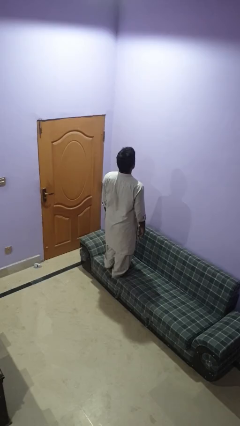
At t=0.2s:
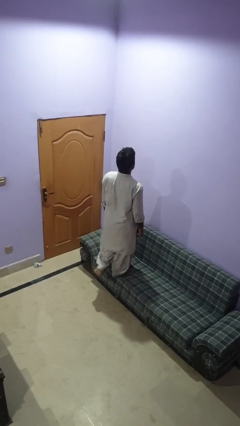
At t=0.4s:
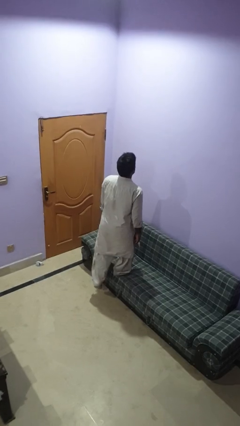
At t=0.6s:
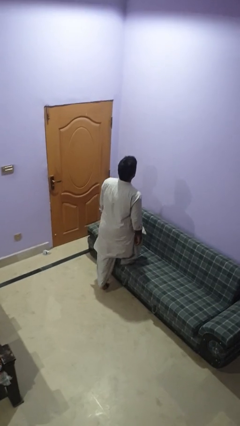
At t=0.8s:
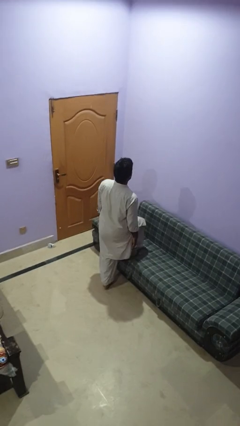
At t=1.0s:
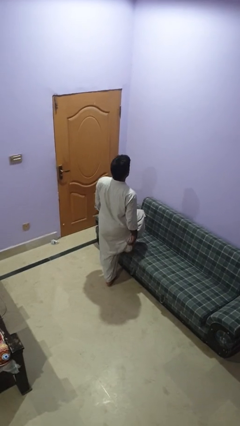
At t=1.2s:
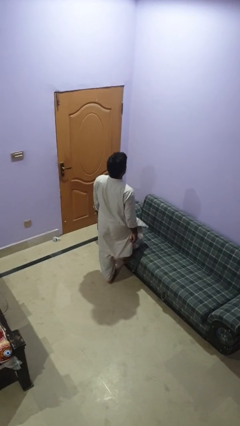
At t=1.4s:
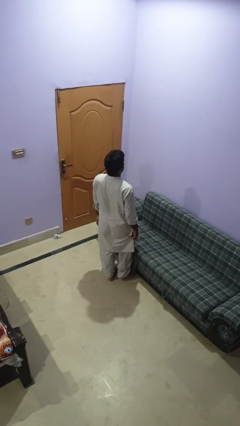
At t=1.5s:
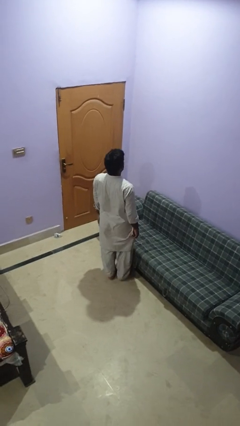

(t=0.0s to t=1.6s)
person climbs off couch

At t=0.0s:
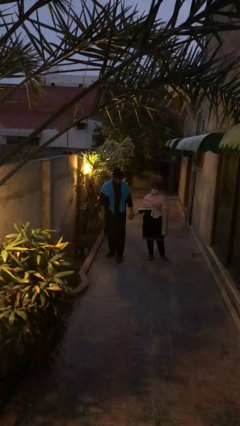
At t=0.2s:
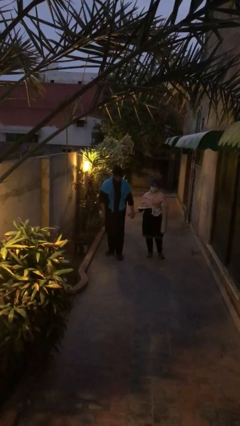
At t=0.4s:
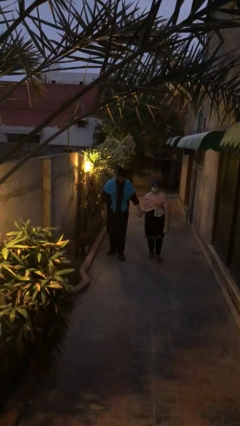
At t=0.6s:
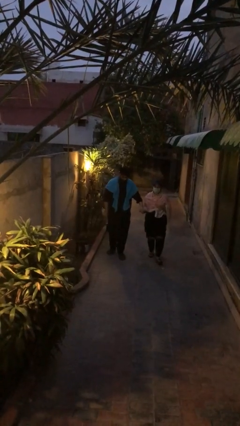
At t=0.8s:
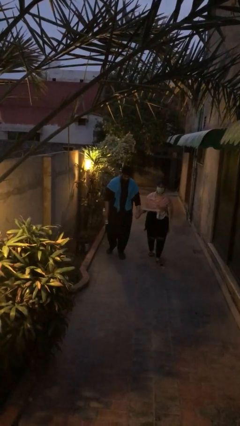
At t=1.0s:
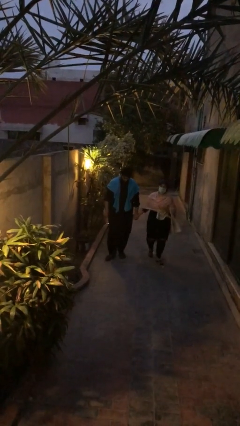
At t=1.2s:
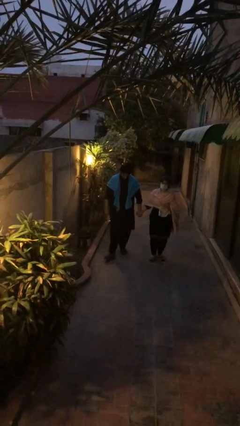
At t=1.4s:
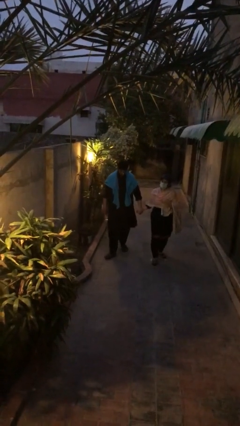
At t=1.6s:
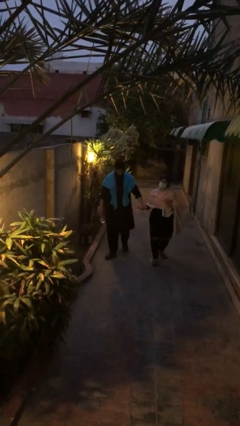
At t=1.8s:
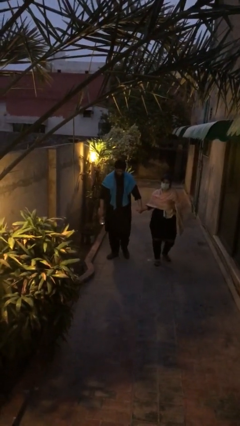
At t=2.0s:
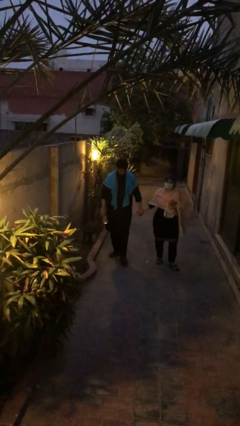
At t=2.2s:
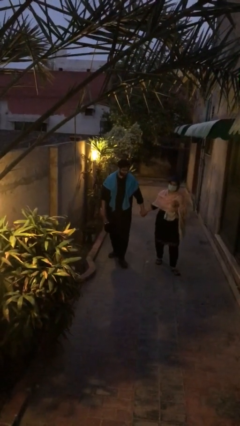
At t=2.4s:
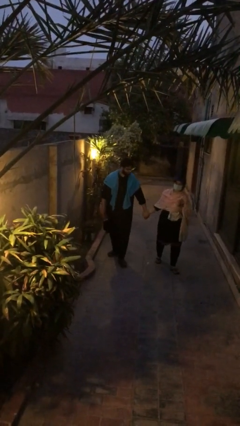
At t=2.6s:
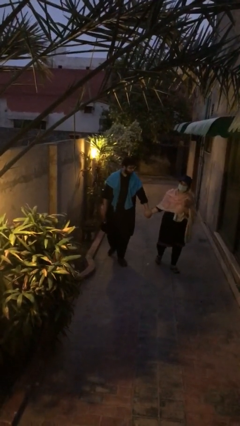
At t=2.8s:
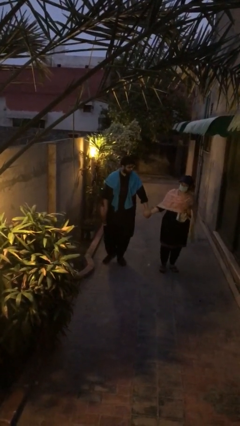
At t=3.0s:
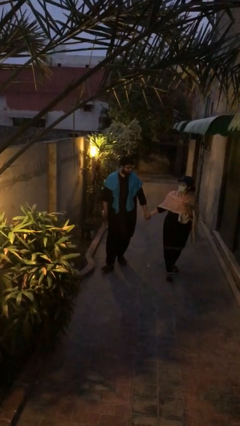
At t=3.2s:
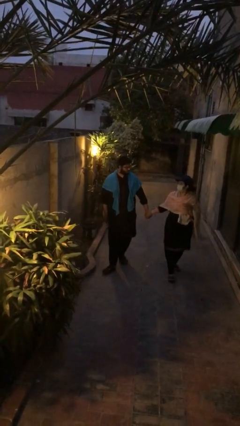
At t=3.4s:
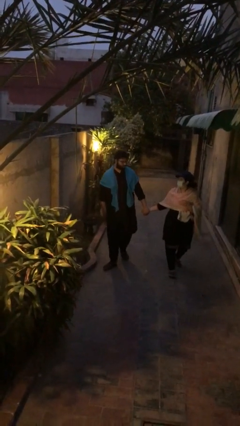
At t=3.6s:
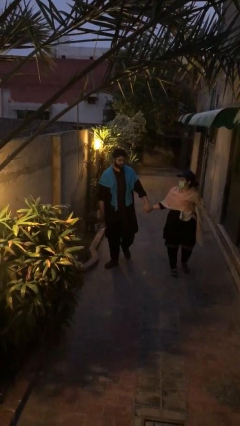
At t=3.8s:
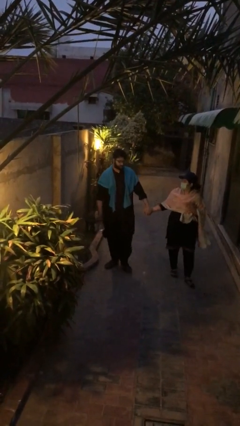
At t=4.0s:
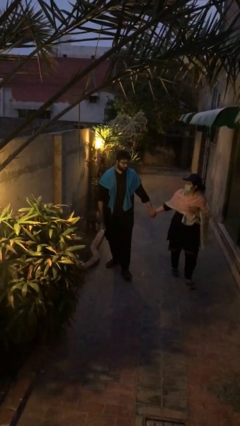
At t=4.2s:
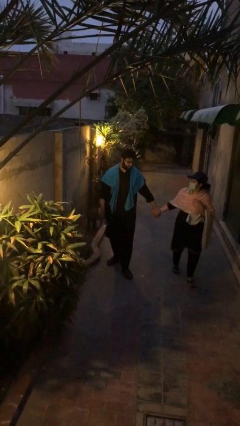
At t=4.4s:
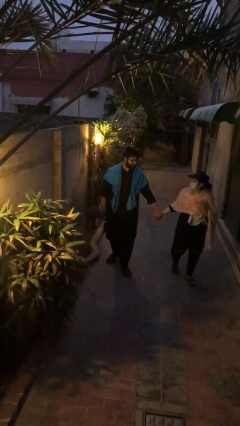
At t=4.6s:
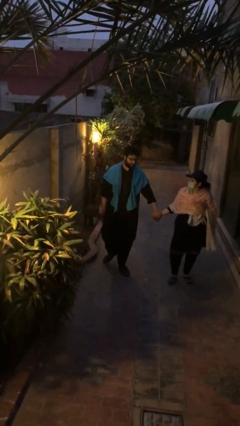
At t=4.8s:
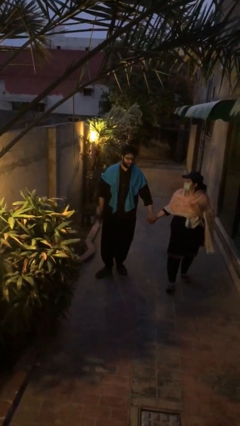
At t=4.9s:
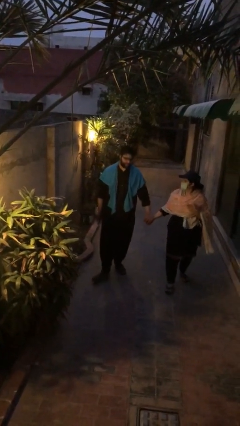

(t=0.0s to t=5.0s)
person holds hand

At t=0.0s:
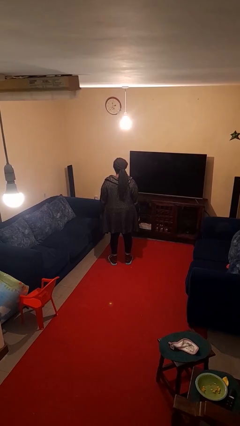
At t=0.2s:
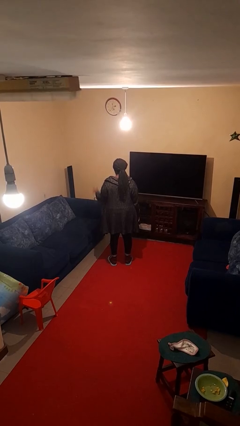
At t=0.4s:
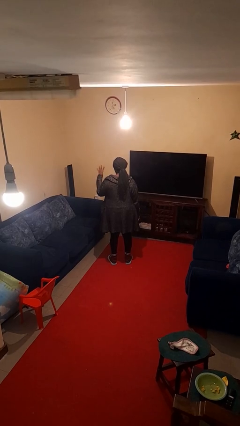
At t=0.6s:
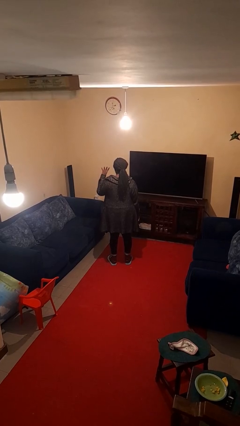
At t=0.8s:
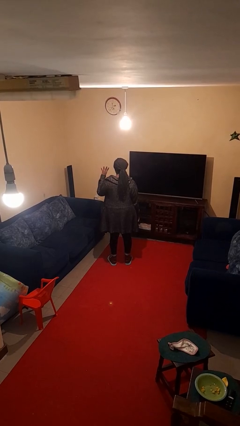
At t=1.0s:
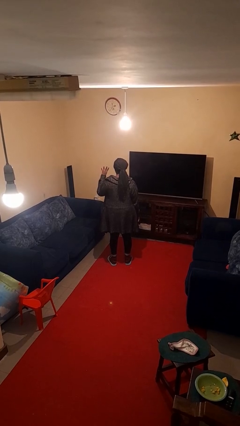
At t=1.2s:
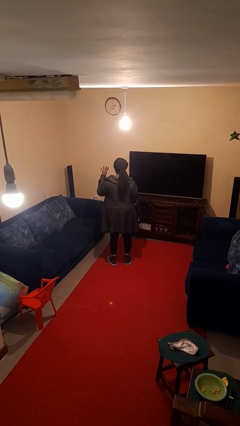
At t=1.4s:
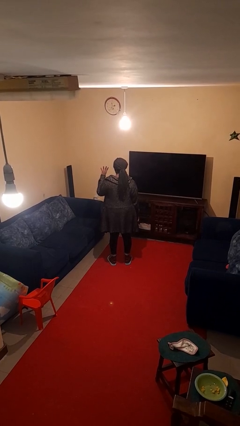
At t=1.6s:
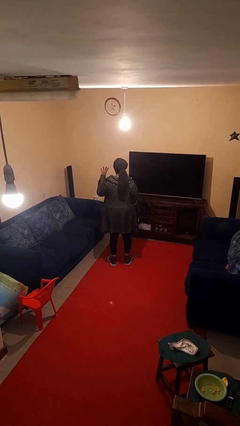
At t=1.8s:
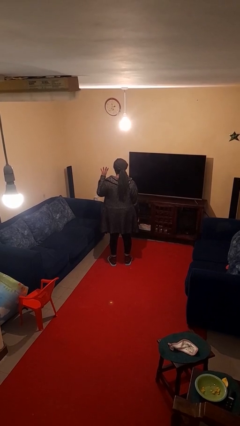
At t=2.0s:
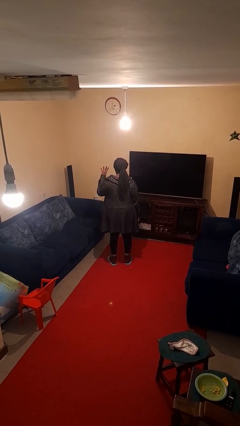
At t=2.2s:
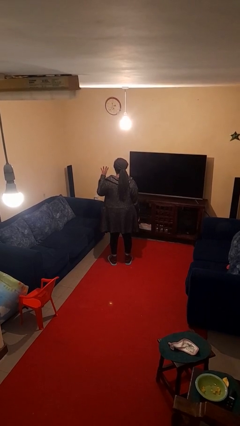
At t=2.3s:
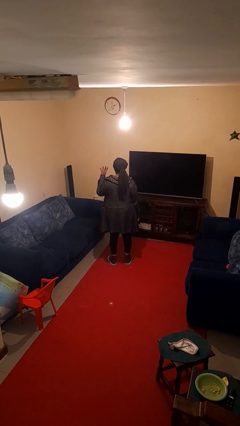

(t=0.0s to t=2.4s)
person gestures number four

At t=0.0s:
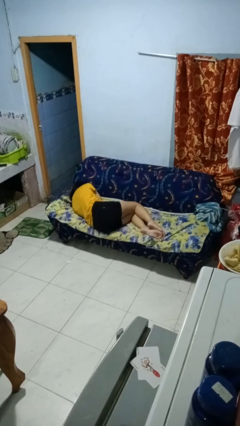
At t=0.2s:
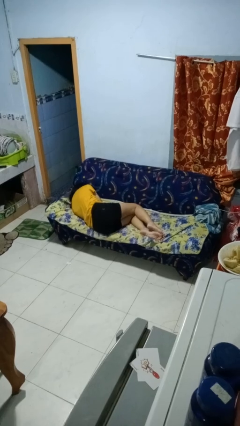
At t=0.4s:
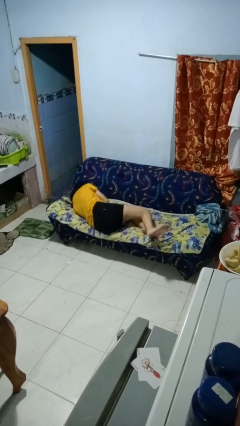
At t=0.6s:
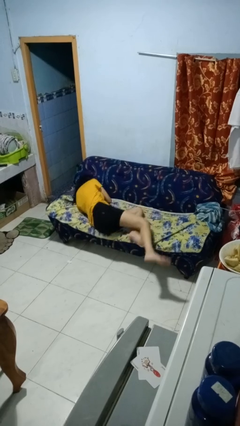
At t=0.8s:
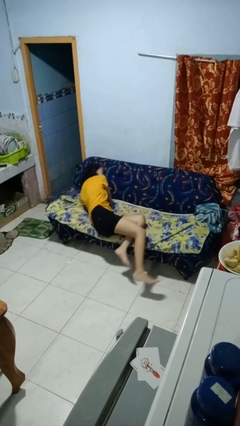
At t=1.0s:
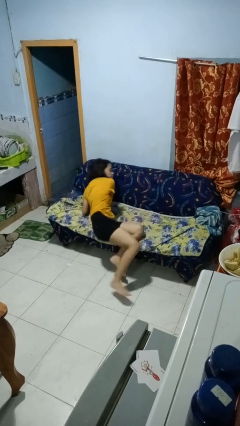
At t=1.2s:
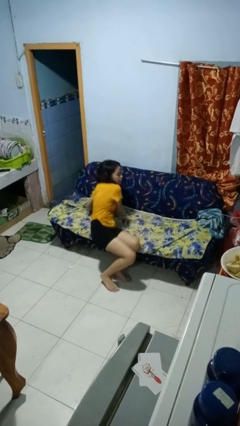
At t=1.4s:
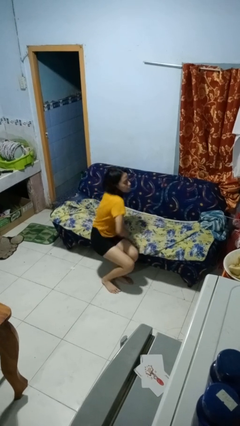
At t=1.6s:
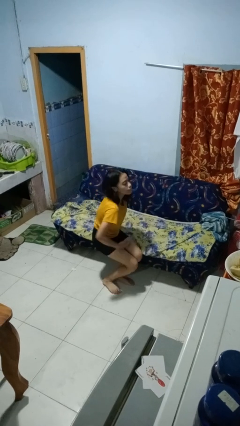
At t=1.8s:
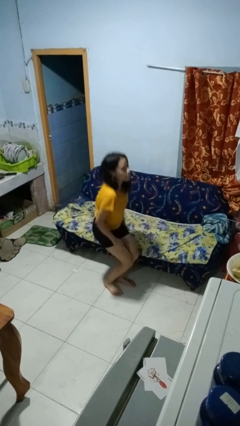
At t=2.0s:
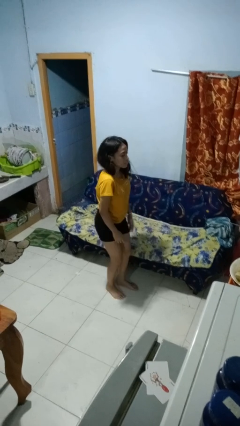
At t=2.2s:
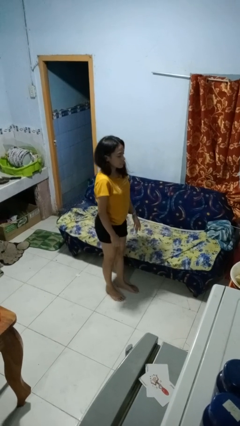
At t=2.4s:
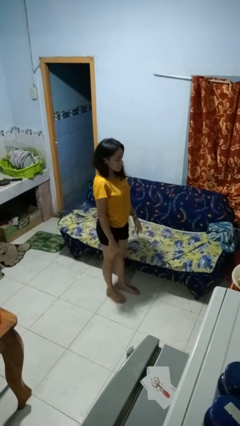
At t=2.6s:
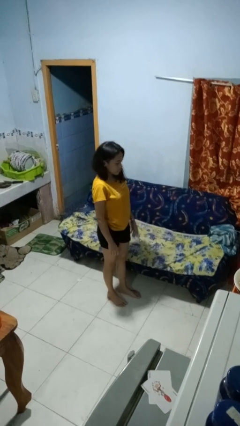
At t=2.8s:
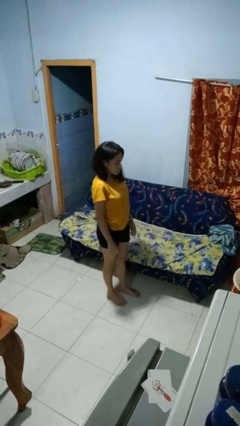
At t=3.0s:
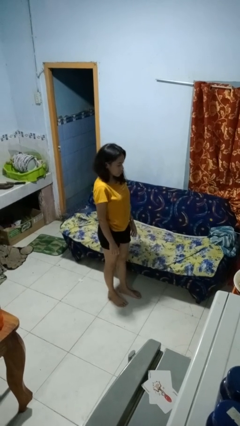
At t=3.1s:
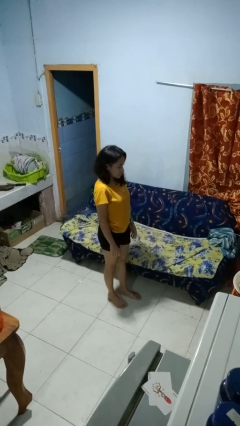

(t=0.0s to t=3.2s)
person stands up

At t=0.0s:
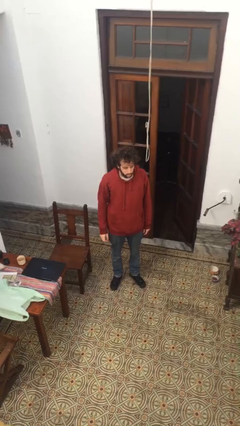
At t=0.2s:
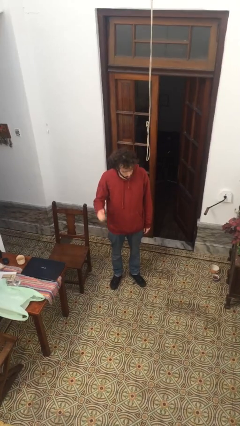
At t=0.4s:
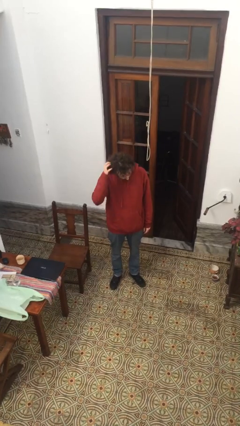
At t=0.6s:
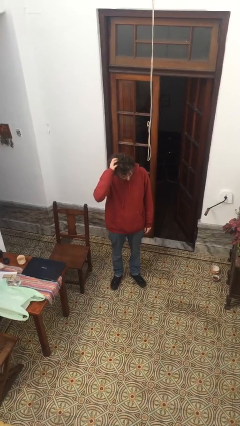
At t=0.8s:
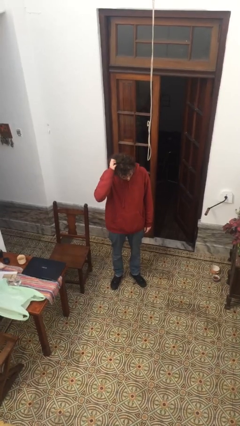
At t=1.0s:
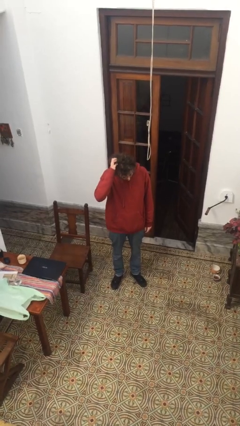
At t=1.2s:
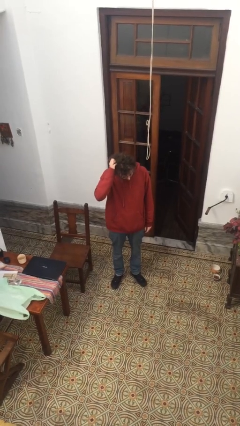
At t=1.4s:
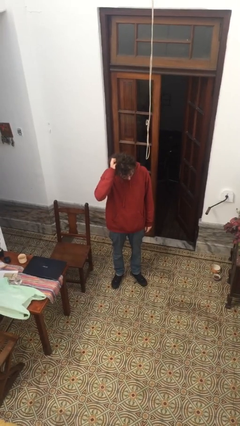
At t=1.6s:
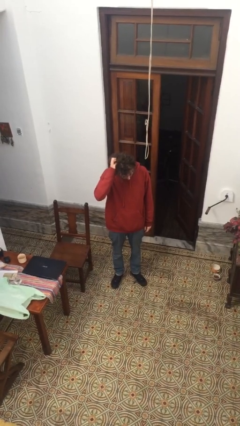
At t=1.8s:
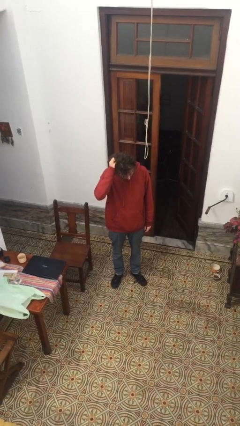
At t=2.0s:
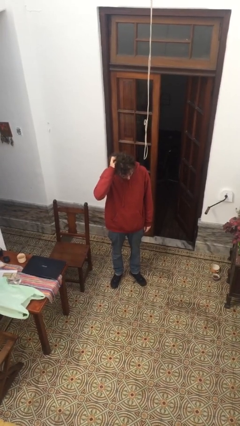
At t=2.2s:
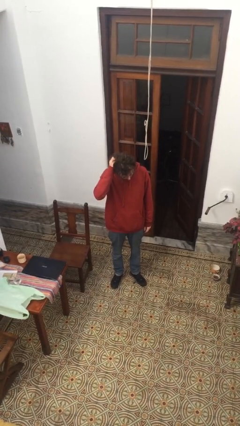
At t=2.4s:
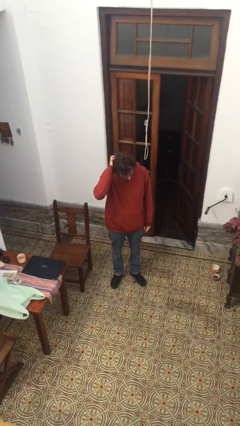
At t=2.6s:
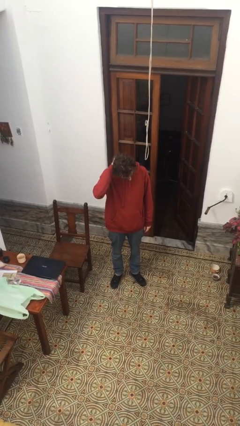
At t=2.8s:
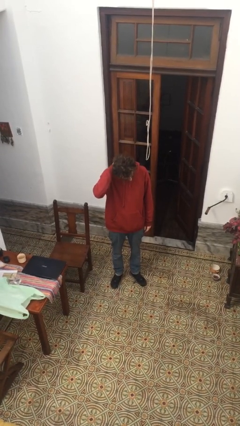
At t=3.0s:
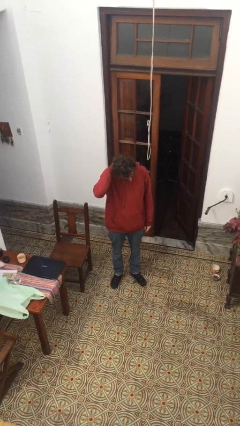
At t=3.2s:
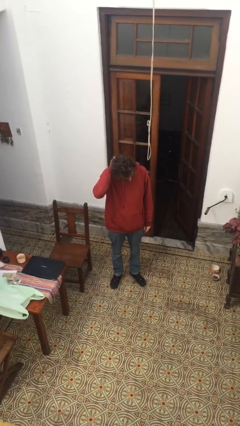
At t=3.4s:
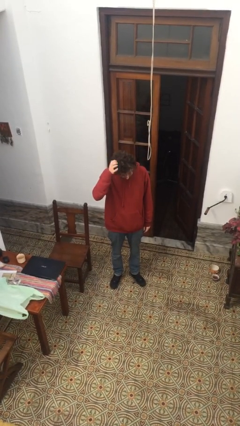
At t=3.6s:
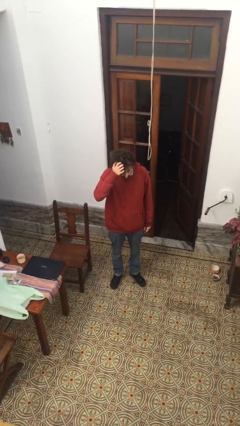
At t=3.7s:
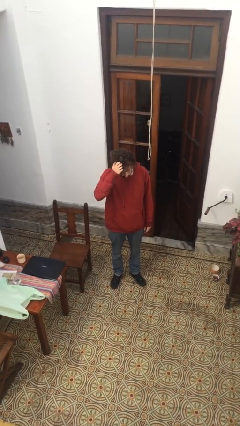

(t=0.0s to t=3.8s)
person scratches face

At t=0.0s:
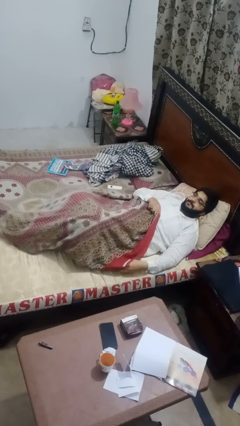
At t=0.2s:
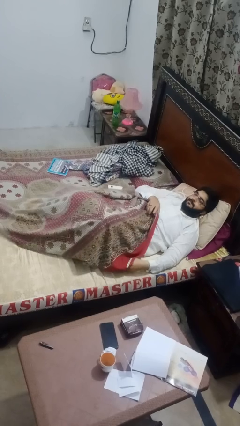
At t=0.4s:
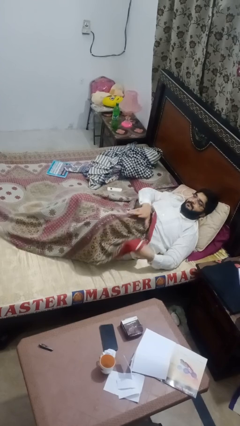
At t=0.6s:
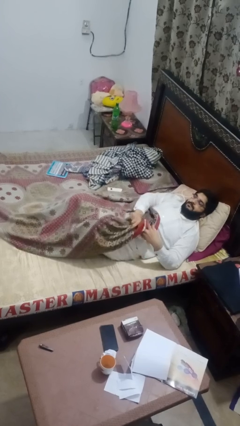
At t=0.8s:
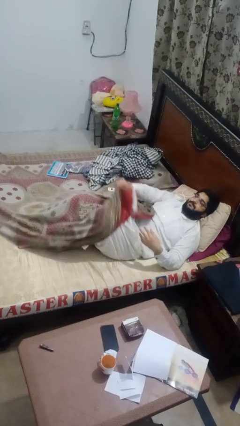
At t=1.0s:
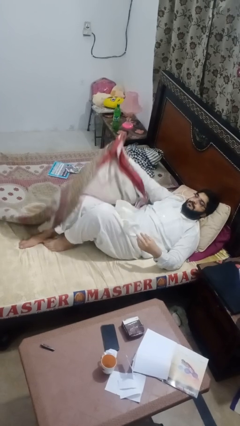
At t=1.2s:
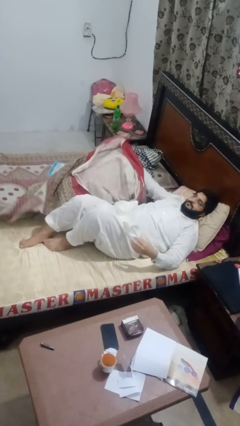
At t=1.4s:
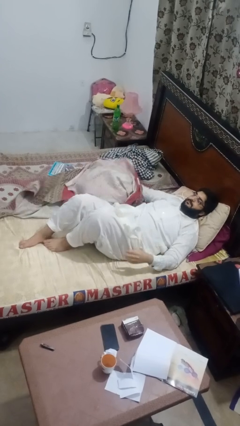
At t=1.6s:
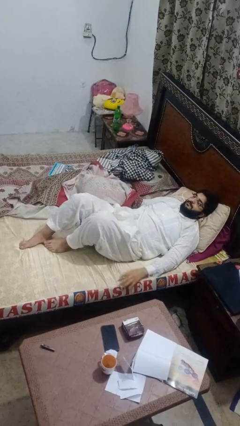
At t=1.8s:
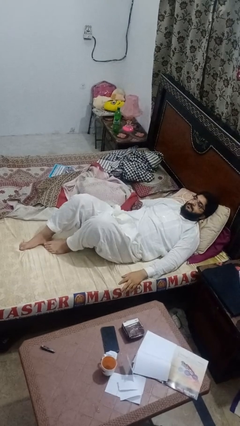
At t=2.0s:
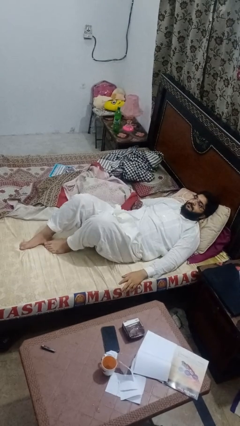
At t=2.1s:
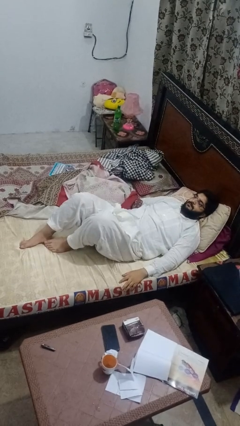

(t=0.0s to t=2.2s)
person uncovers with bedsheets
